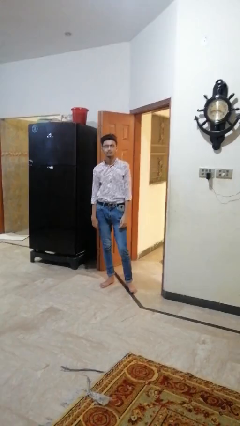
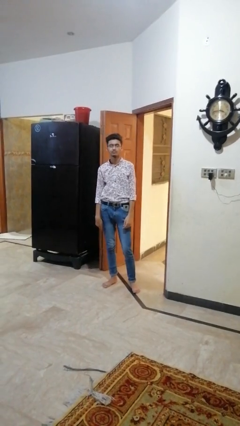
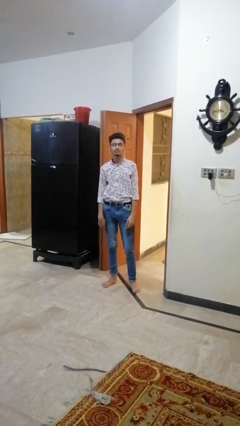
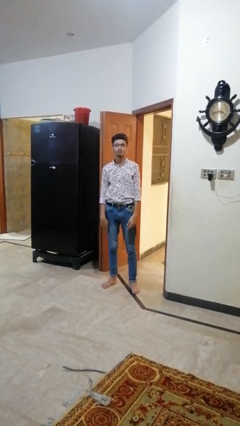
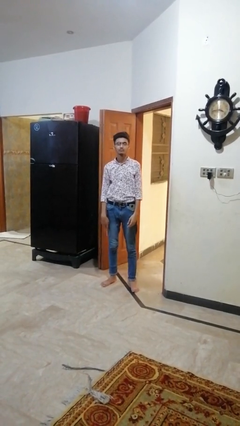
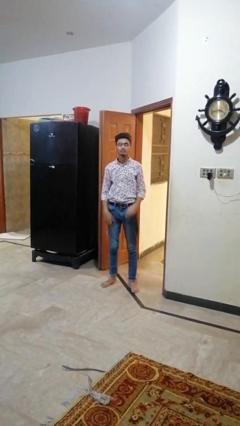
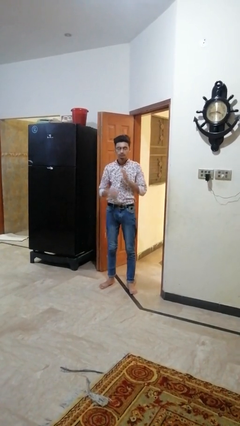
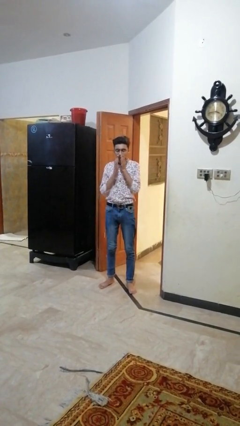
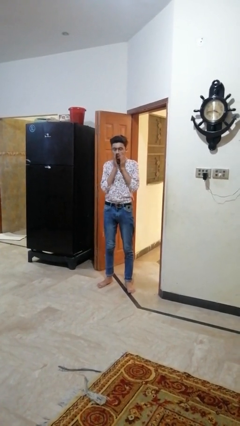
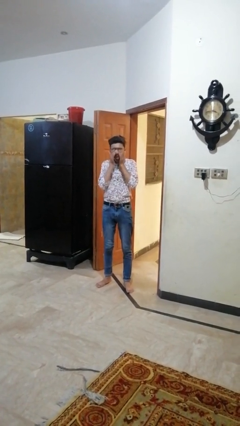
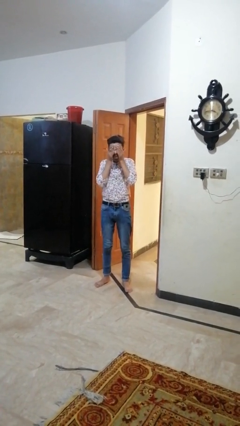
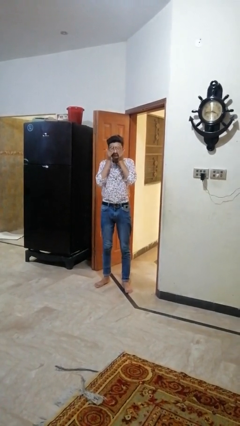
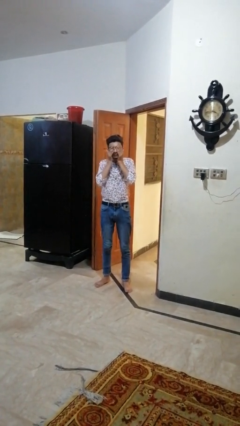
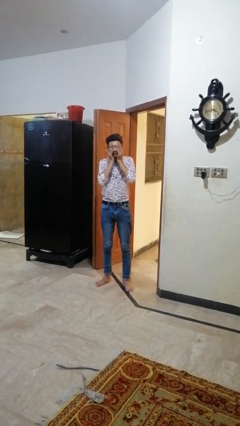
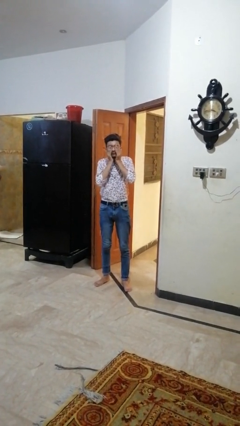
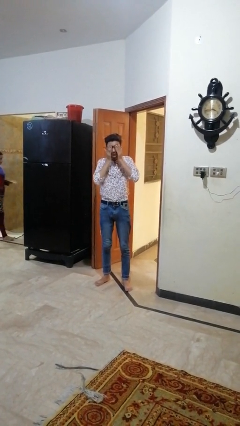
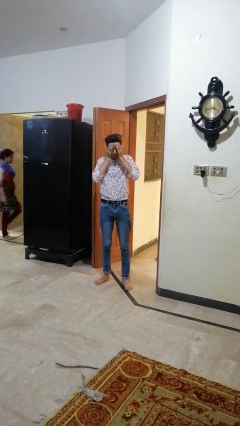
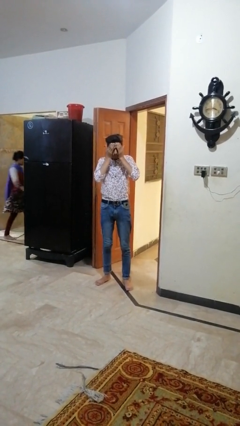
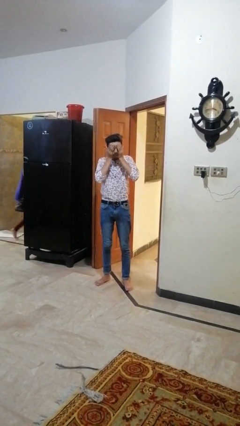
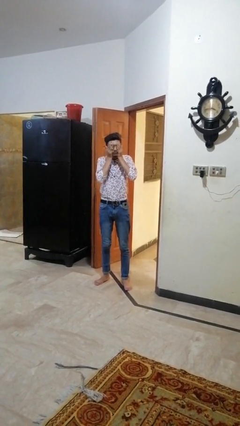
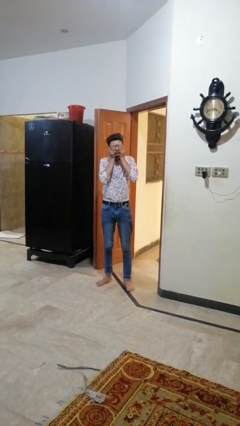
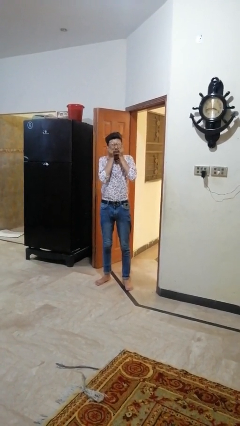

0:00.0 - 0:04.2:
person rubs eyes

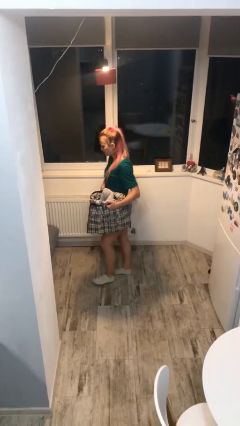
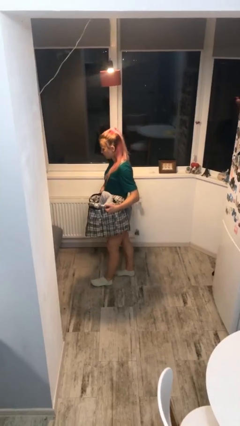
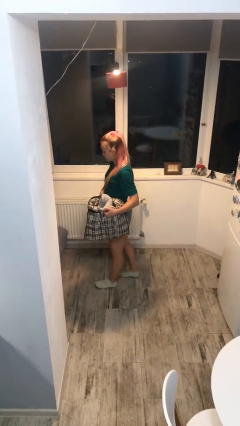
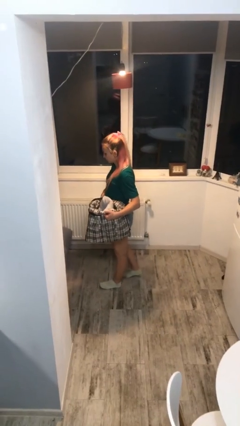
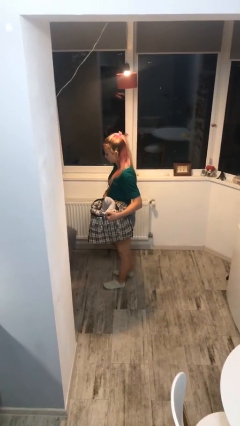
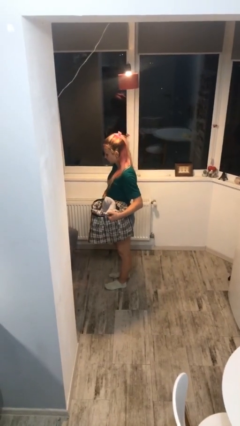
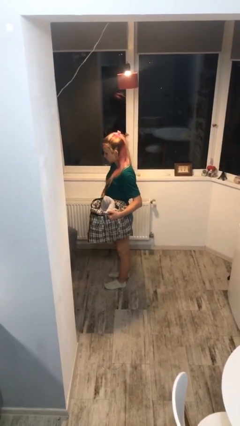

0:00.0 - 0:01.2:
person carries laundry basket

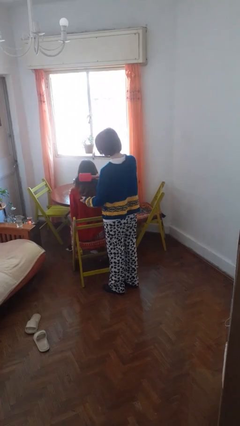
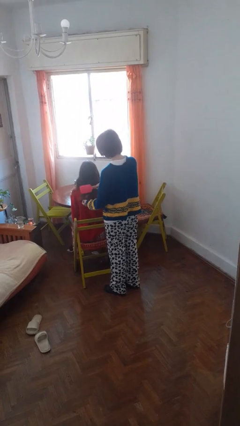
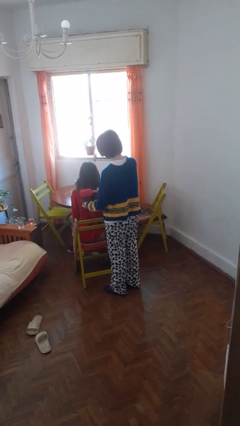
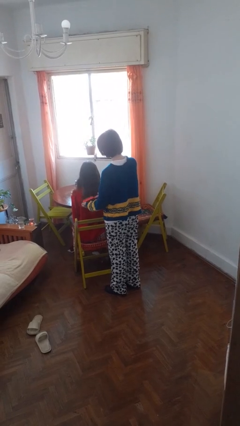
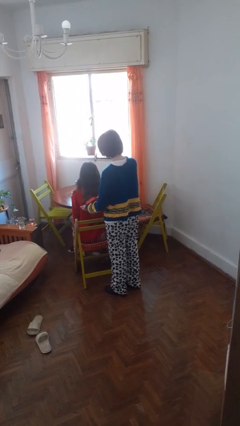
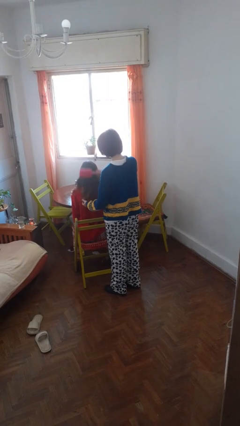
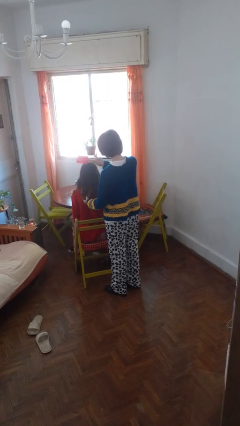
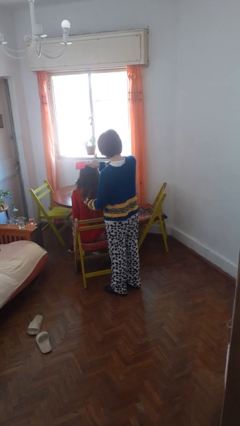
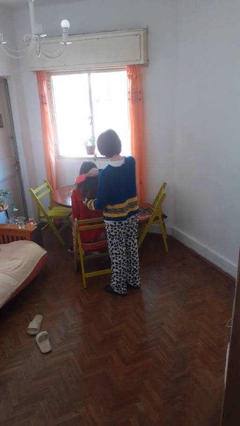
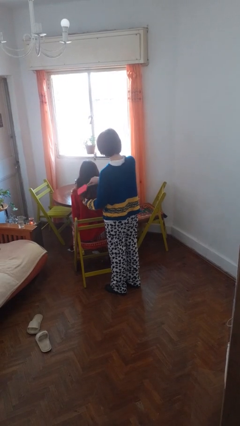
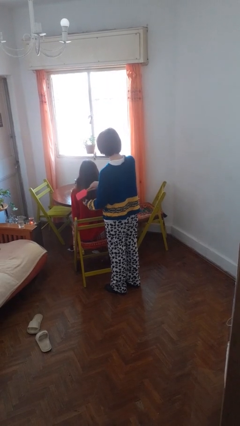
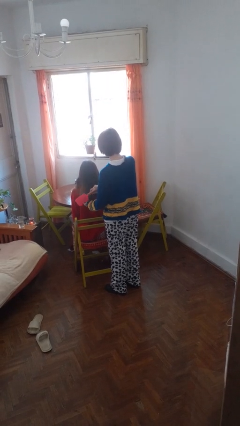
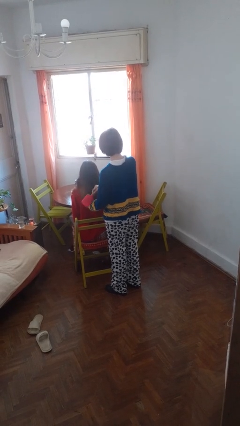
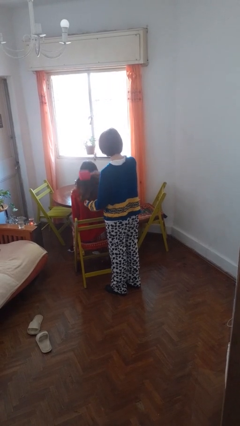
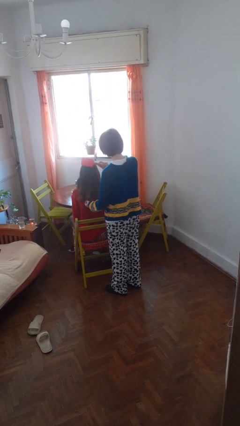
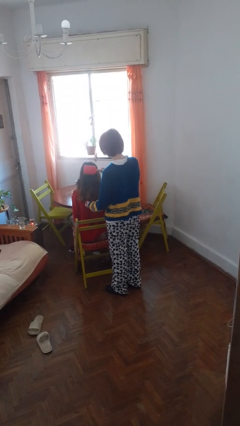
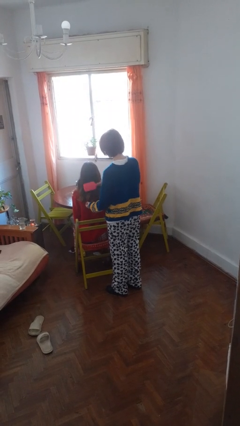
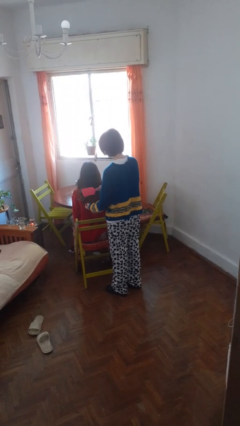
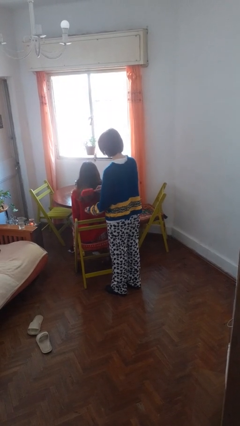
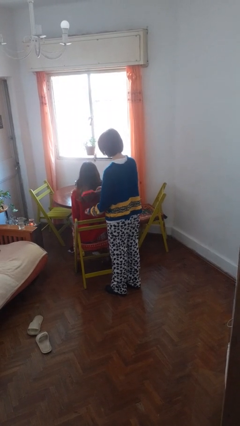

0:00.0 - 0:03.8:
person brushes hair of person

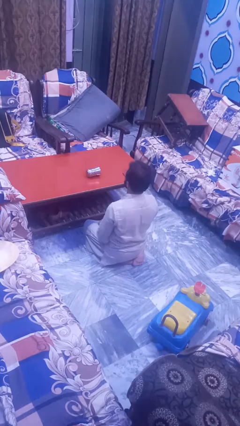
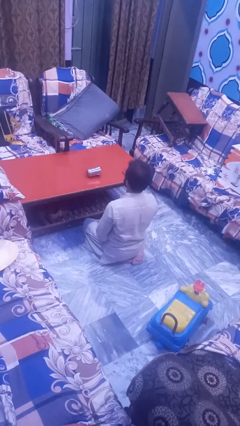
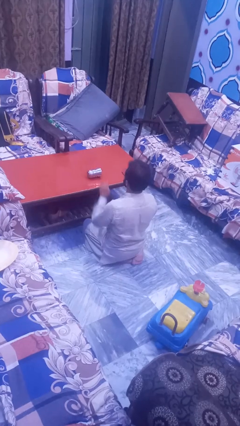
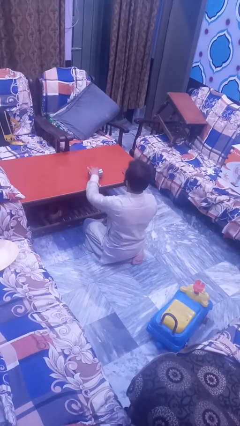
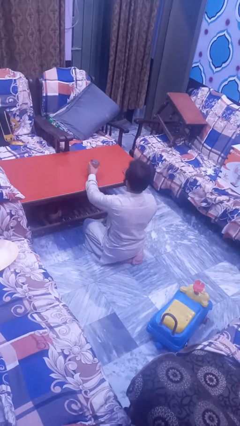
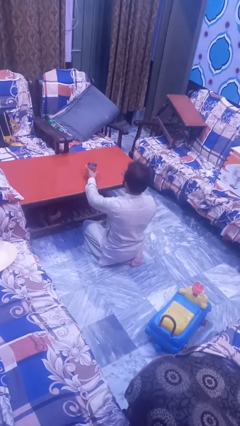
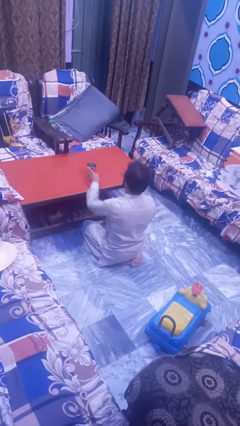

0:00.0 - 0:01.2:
person sets upright glass

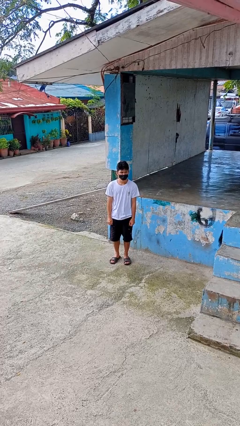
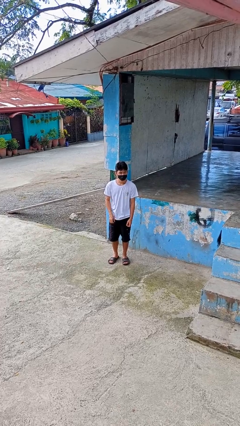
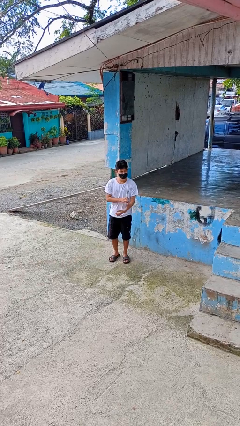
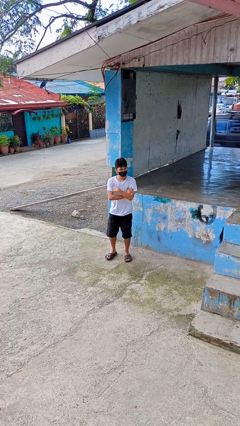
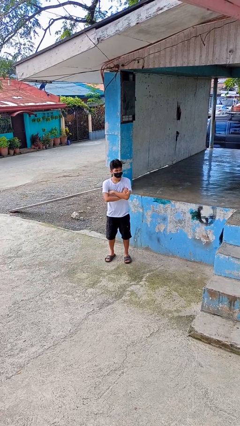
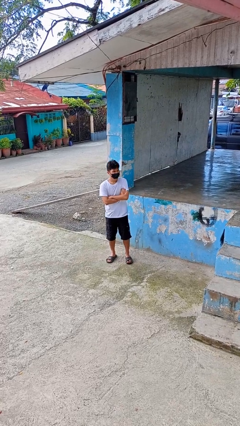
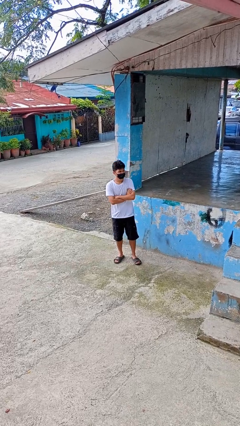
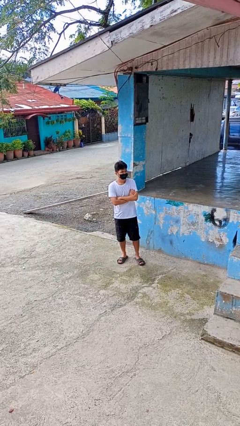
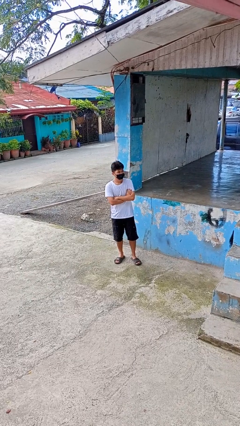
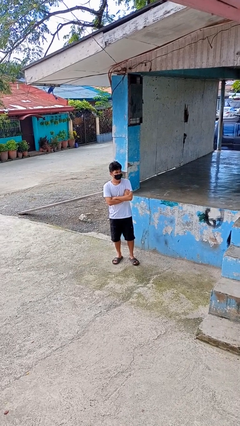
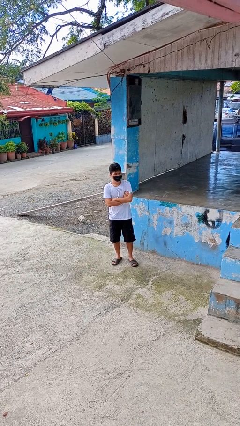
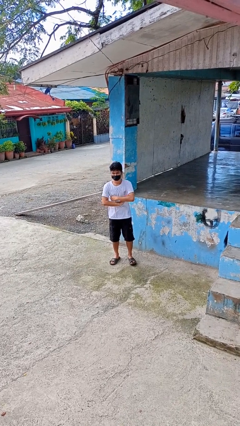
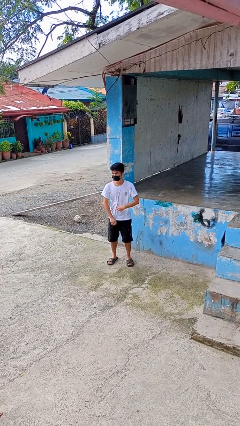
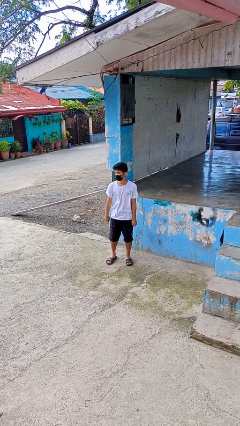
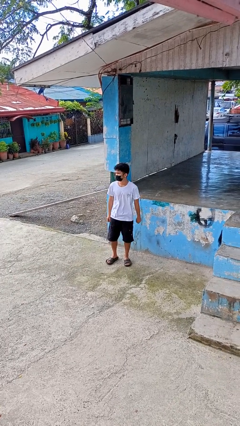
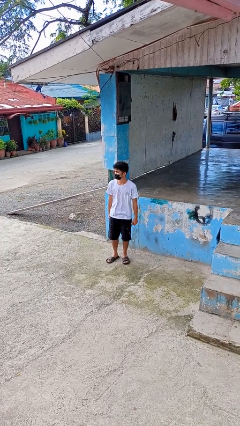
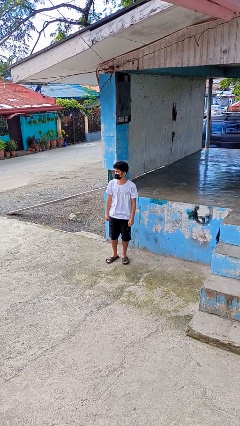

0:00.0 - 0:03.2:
person crosses arms

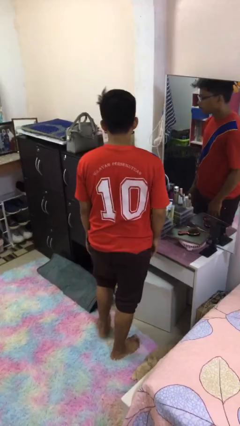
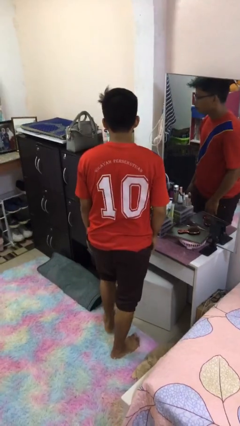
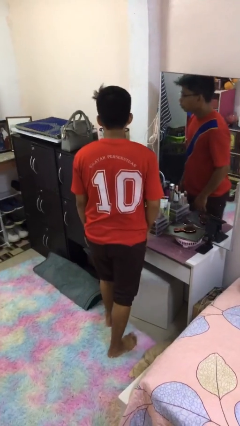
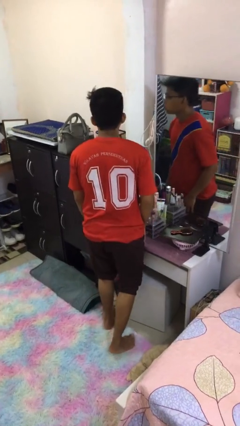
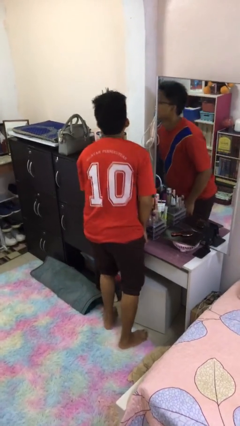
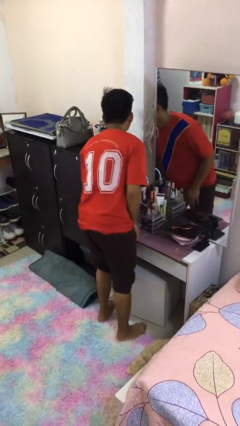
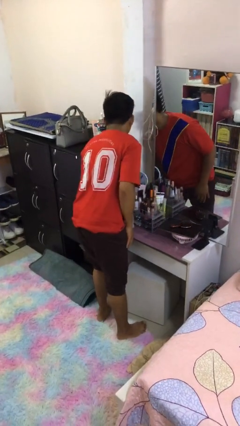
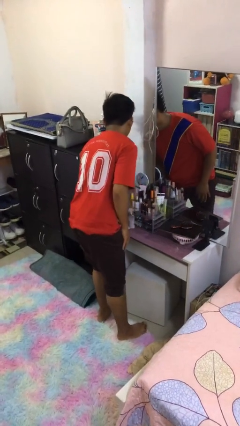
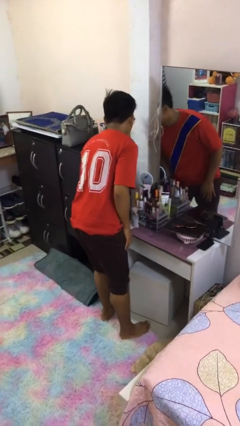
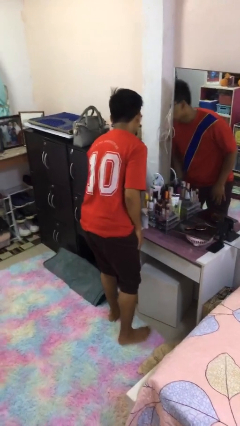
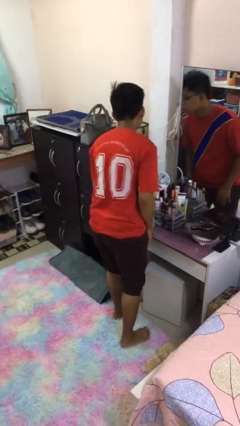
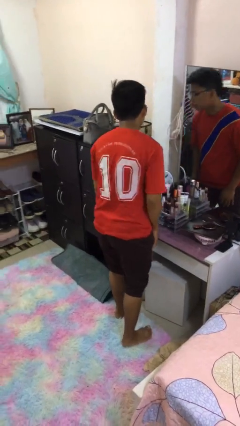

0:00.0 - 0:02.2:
person bumps into table

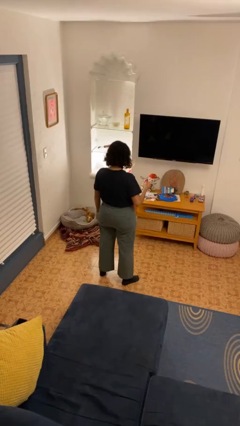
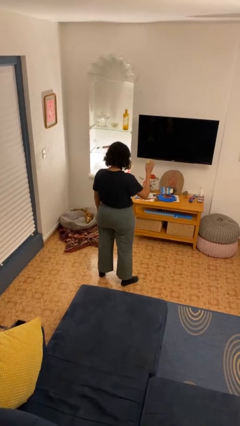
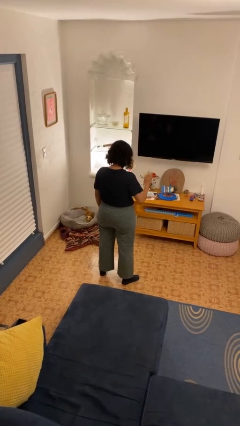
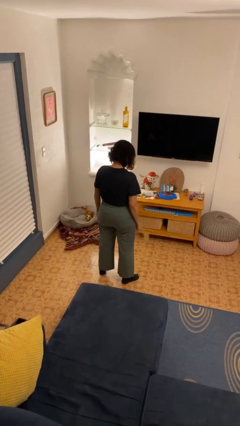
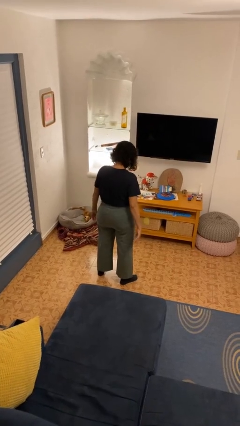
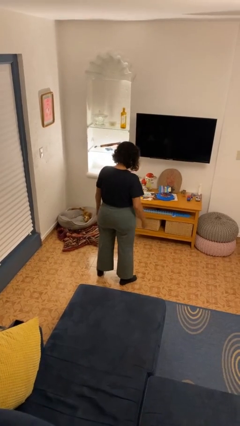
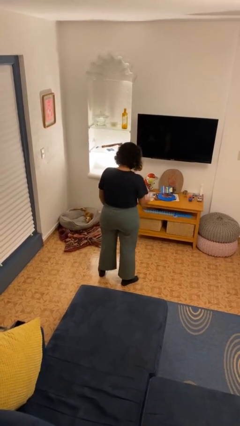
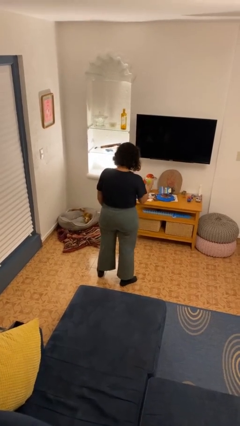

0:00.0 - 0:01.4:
person bounces ball on floor
